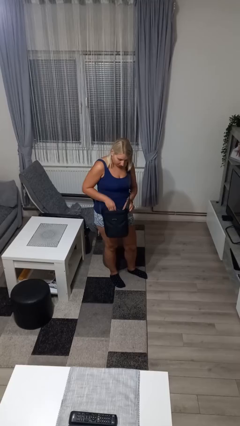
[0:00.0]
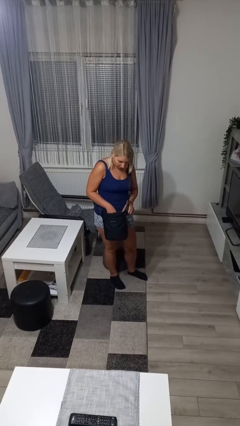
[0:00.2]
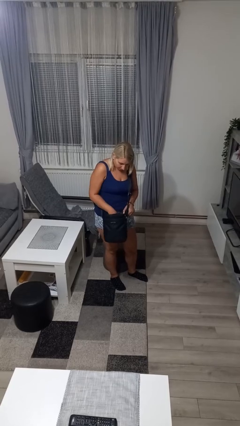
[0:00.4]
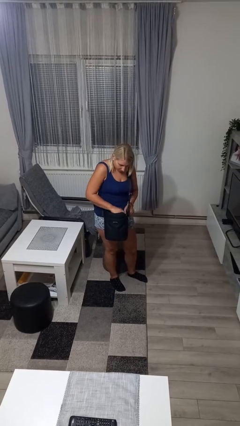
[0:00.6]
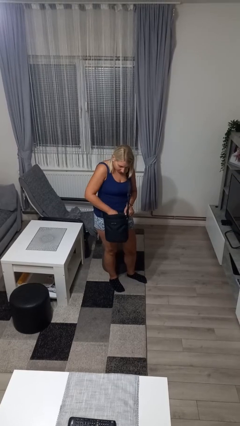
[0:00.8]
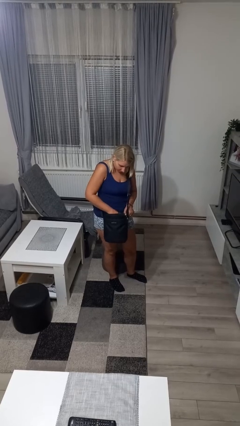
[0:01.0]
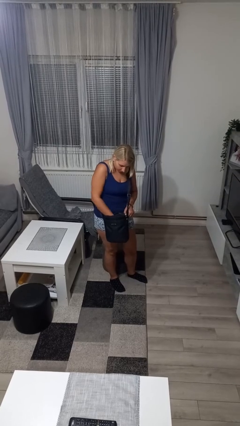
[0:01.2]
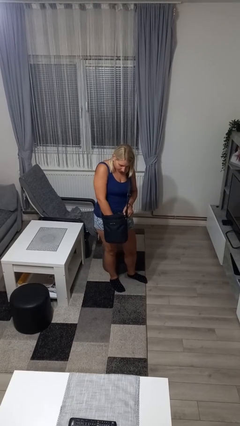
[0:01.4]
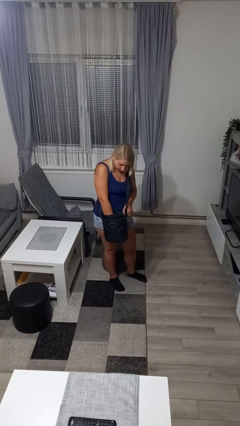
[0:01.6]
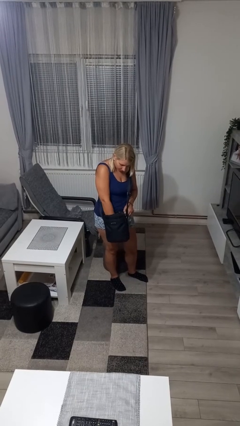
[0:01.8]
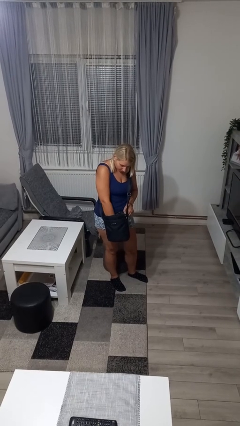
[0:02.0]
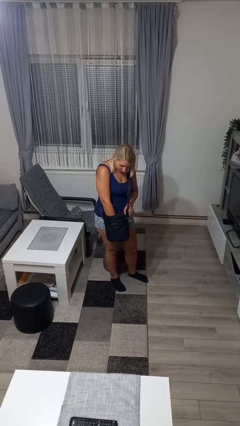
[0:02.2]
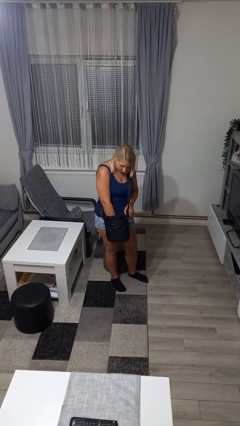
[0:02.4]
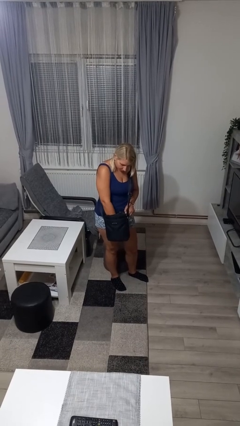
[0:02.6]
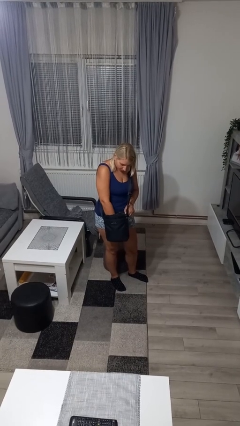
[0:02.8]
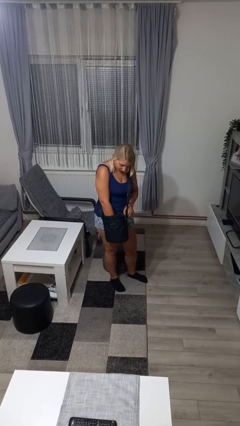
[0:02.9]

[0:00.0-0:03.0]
person searches in purse

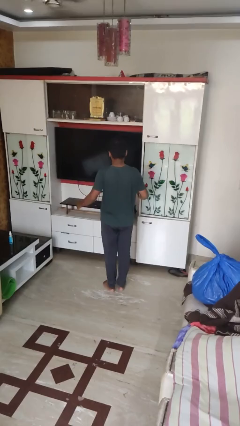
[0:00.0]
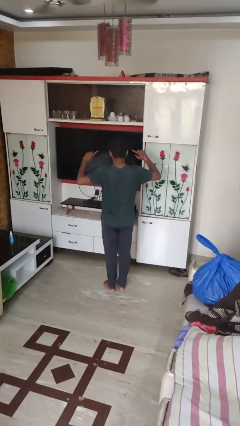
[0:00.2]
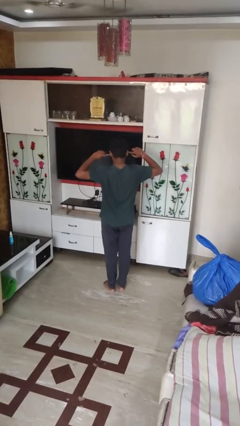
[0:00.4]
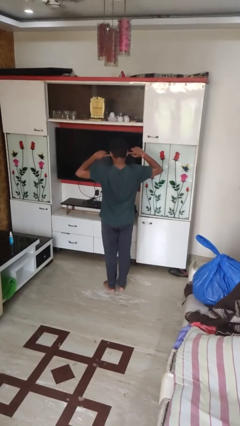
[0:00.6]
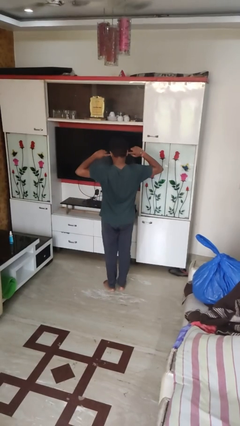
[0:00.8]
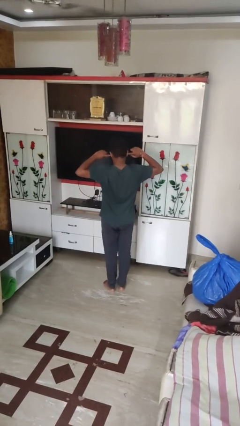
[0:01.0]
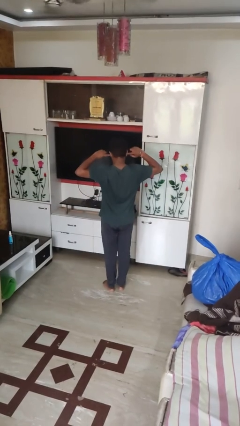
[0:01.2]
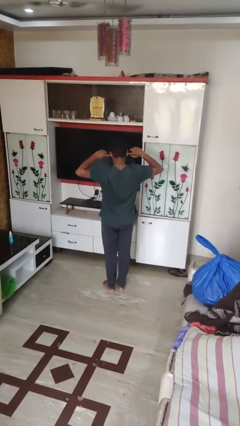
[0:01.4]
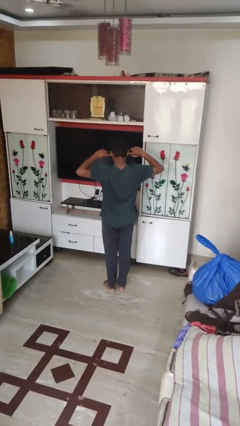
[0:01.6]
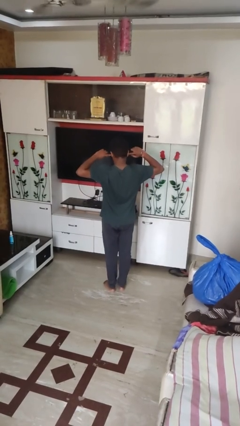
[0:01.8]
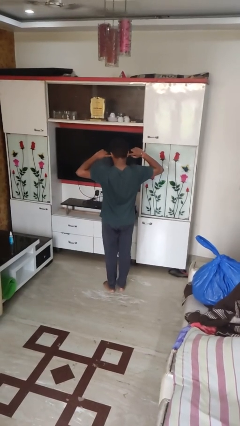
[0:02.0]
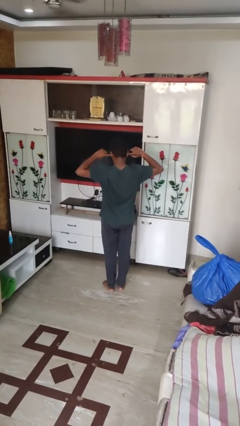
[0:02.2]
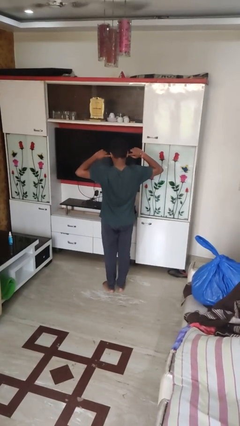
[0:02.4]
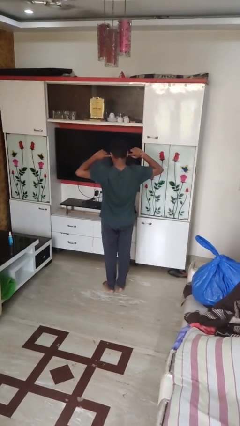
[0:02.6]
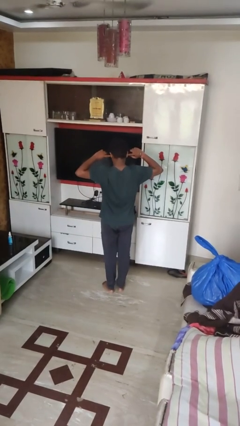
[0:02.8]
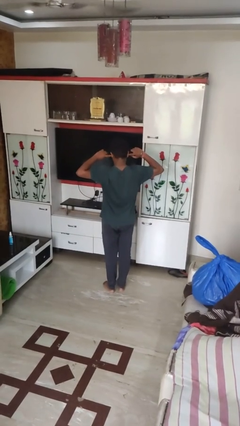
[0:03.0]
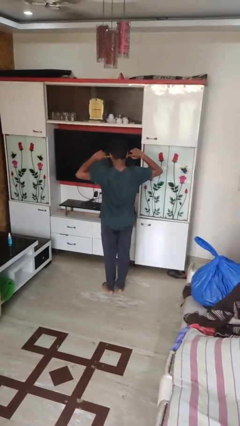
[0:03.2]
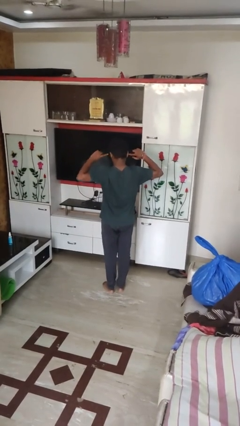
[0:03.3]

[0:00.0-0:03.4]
person puts fingers in ear

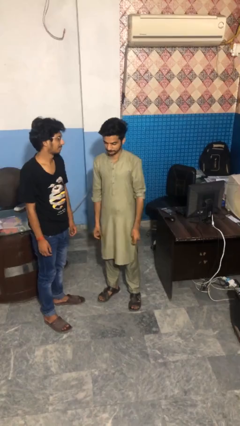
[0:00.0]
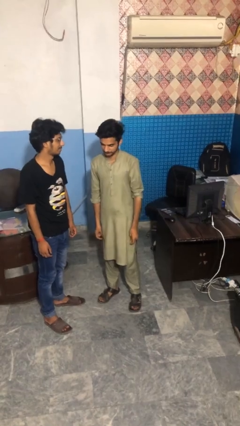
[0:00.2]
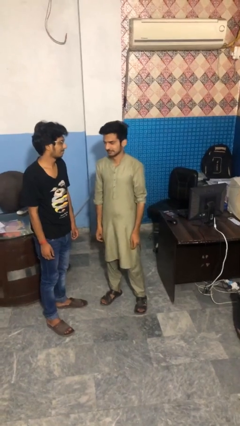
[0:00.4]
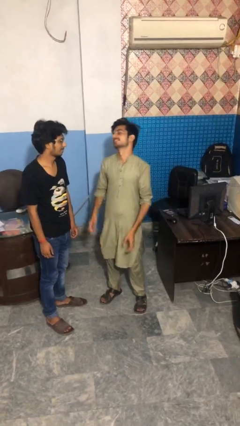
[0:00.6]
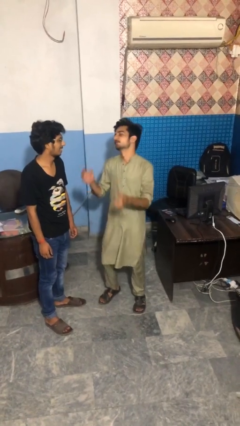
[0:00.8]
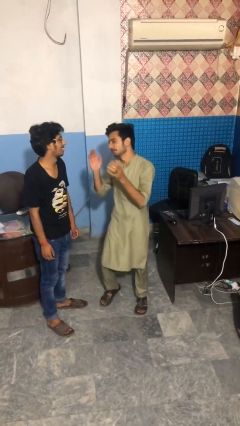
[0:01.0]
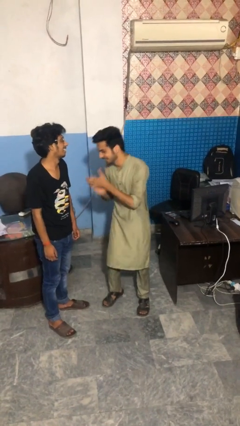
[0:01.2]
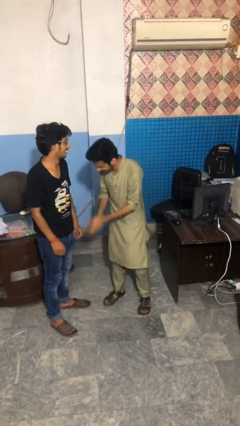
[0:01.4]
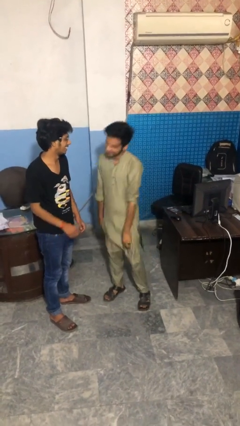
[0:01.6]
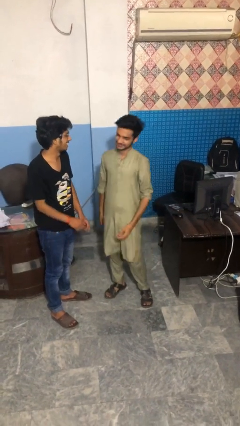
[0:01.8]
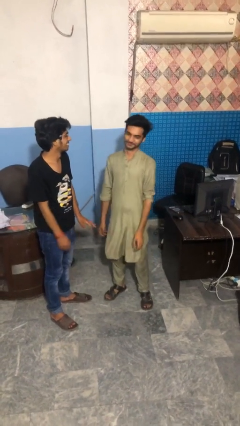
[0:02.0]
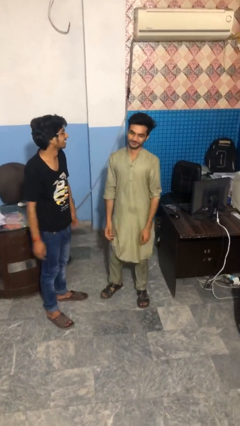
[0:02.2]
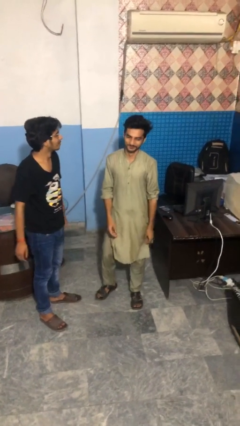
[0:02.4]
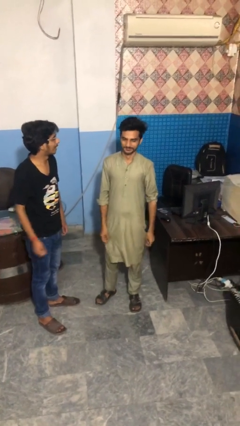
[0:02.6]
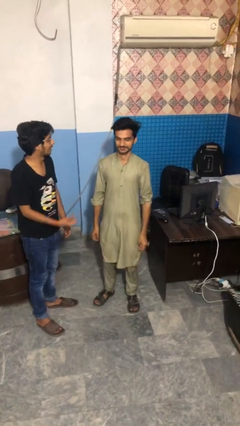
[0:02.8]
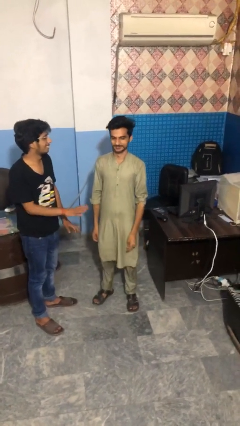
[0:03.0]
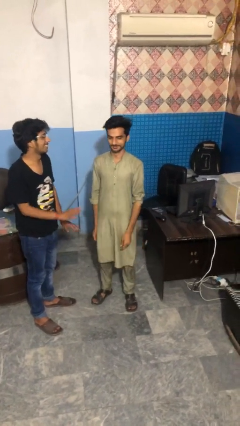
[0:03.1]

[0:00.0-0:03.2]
person laughs with person

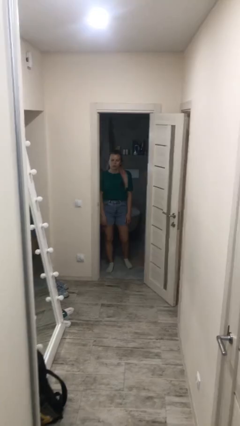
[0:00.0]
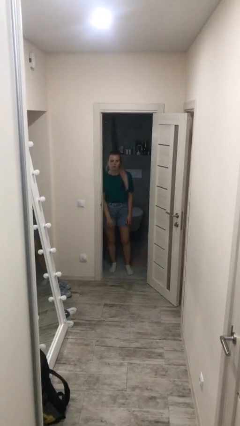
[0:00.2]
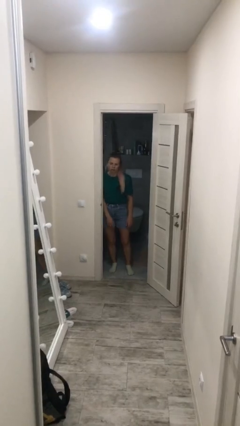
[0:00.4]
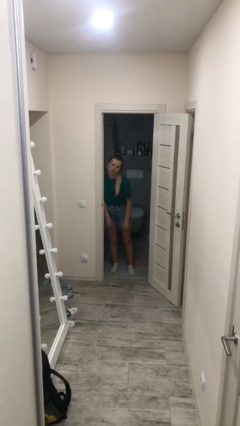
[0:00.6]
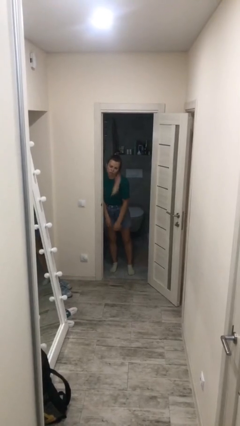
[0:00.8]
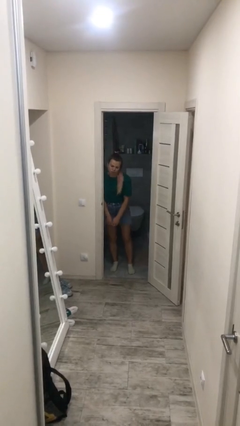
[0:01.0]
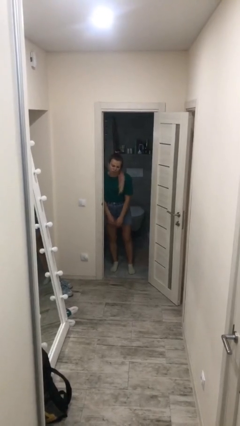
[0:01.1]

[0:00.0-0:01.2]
person bumps into wall

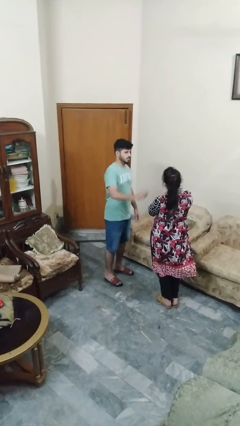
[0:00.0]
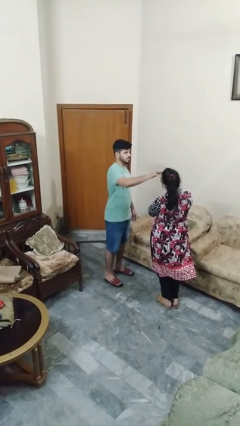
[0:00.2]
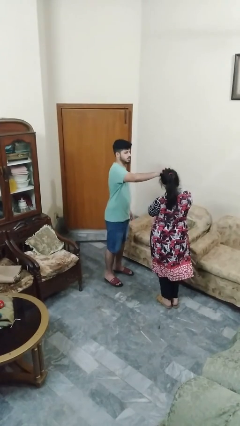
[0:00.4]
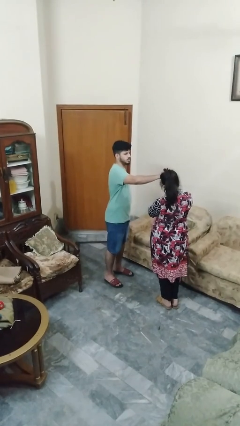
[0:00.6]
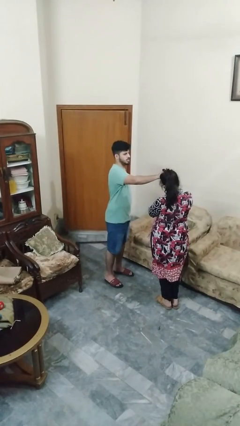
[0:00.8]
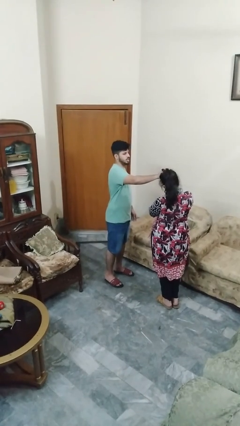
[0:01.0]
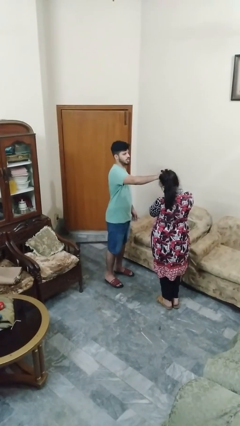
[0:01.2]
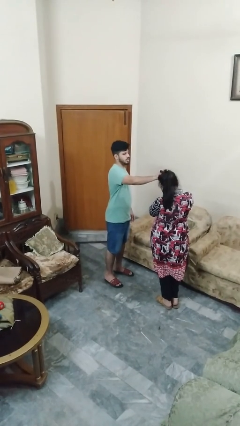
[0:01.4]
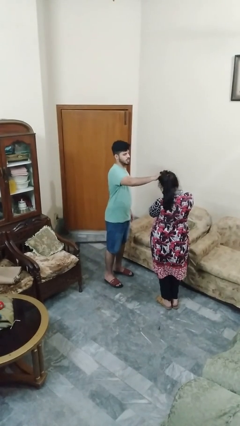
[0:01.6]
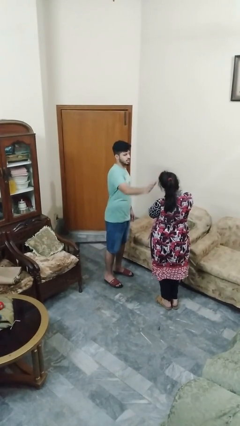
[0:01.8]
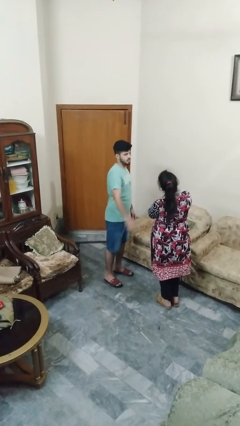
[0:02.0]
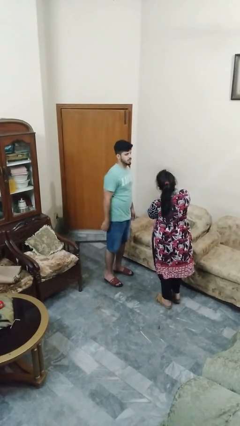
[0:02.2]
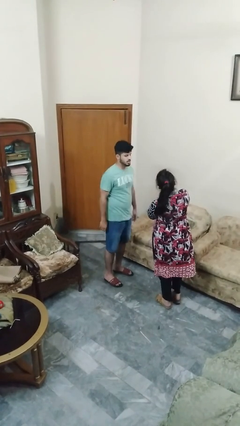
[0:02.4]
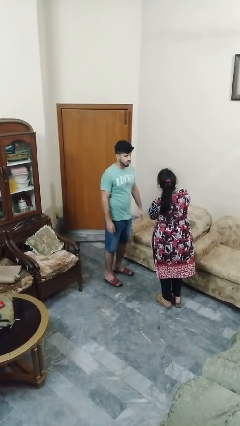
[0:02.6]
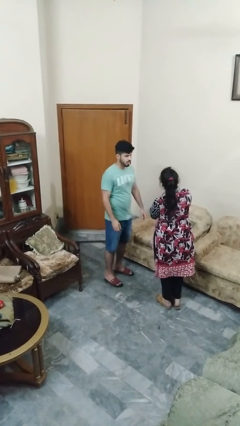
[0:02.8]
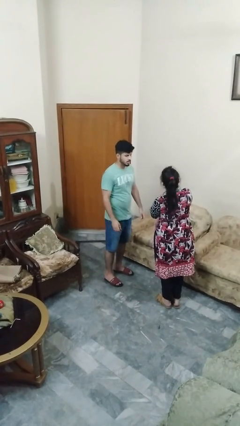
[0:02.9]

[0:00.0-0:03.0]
person grabs person by hair

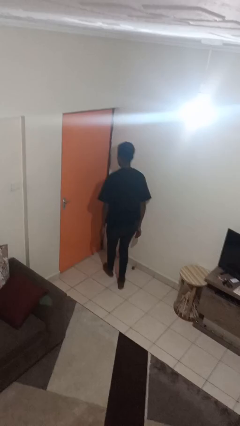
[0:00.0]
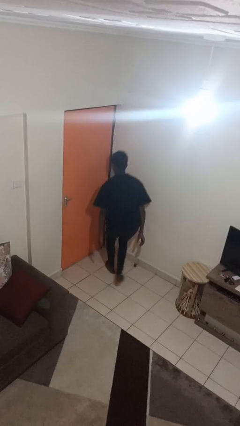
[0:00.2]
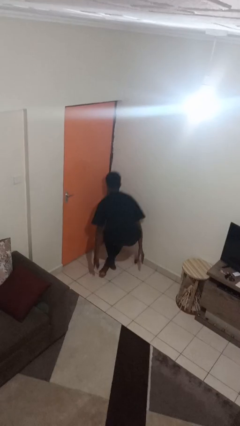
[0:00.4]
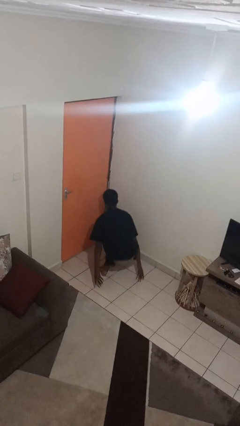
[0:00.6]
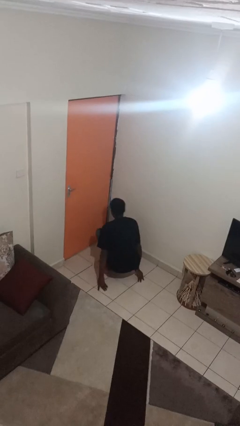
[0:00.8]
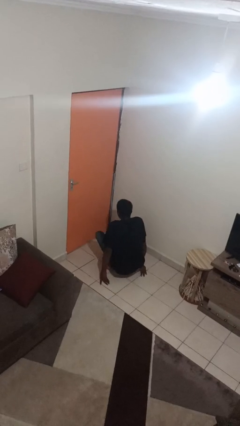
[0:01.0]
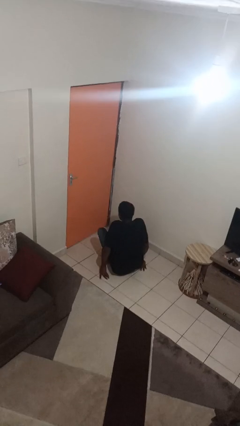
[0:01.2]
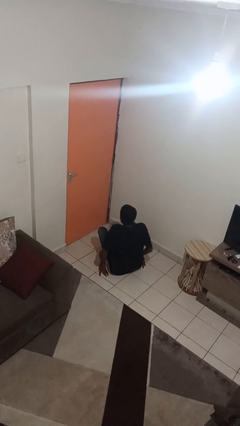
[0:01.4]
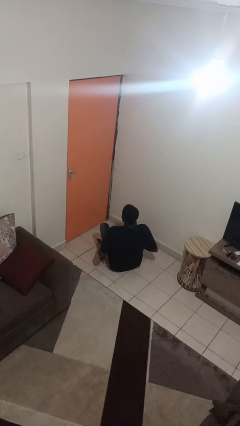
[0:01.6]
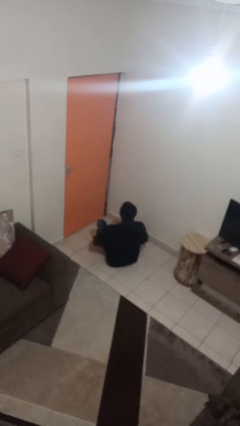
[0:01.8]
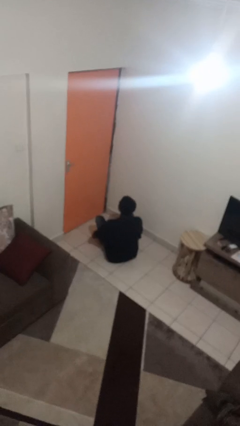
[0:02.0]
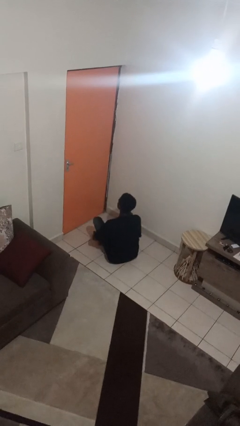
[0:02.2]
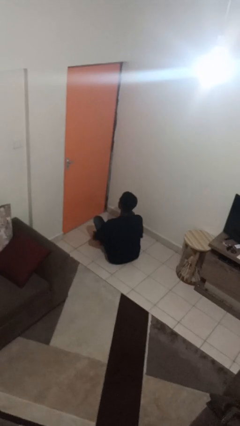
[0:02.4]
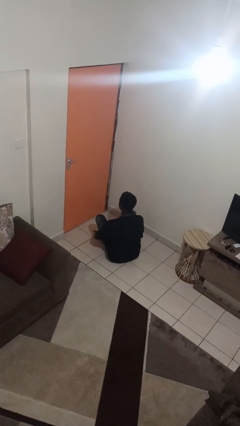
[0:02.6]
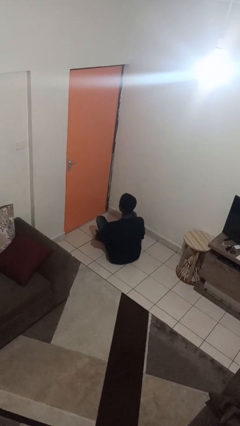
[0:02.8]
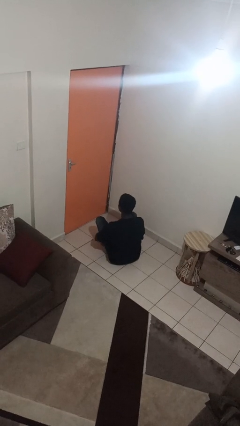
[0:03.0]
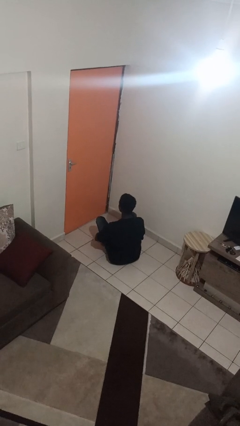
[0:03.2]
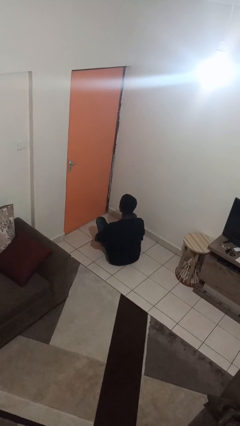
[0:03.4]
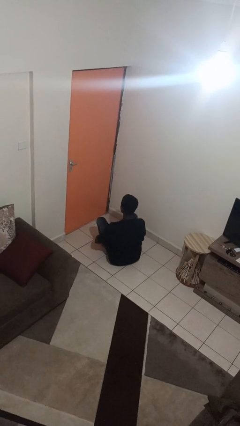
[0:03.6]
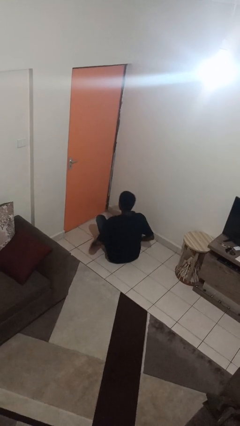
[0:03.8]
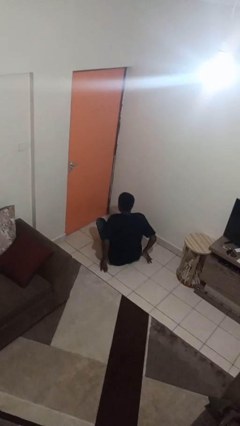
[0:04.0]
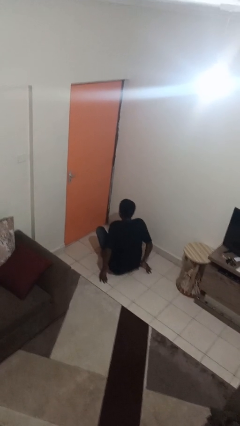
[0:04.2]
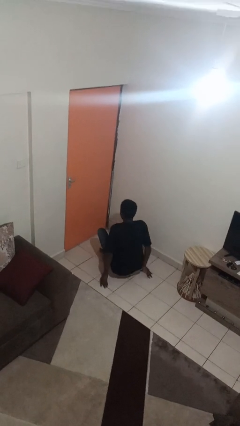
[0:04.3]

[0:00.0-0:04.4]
person sits crisscross
